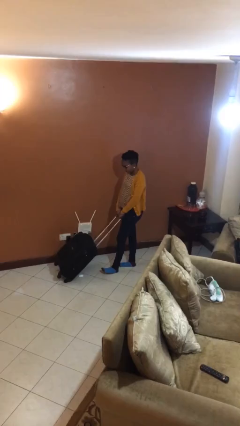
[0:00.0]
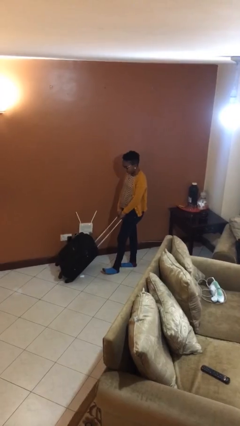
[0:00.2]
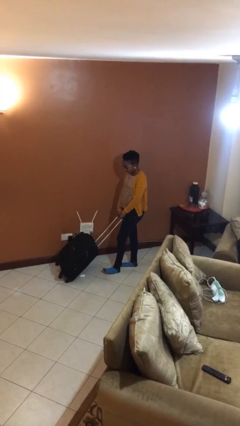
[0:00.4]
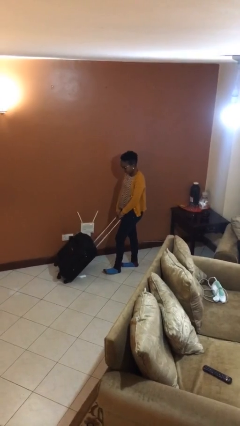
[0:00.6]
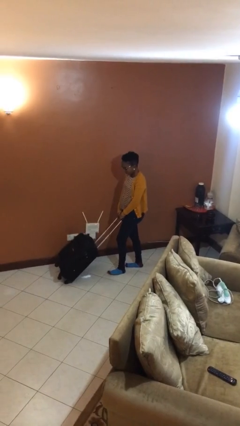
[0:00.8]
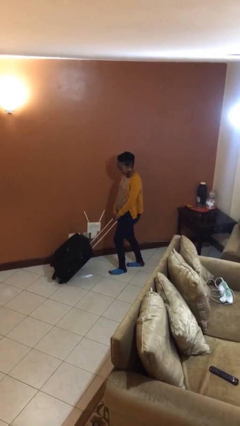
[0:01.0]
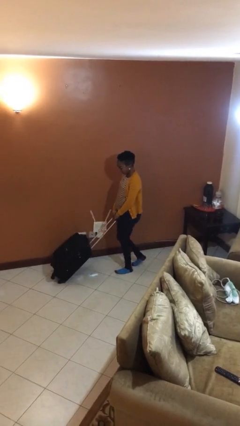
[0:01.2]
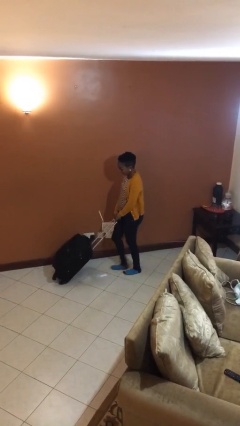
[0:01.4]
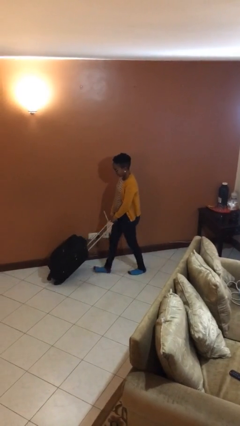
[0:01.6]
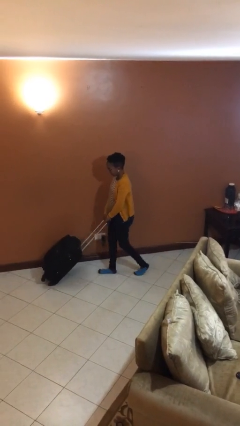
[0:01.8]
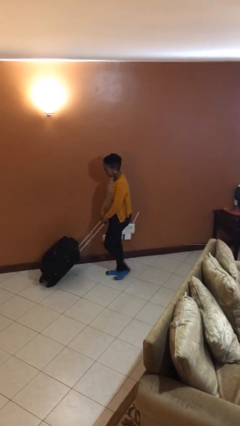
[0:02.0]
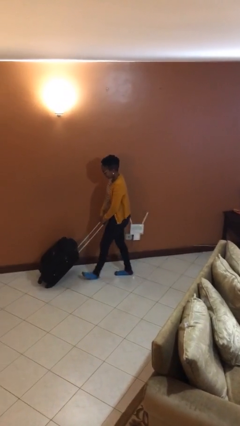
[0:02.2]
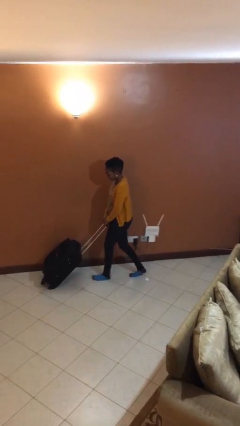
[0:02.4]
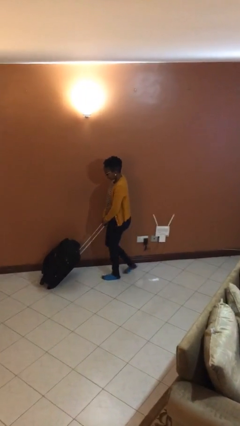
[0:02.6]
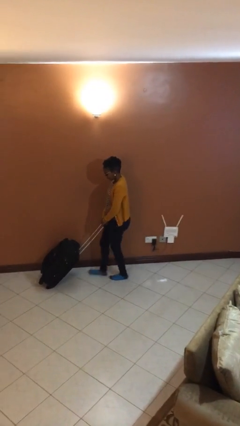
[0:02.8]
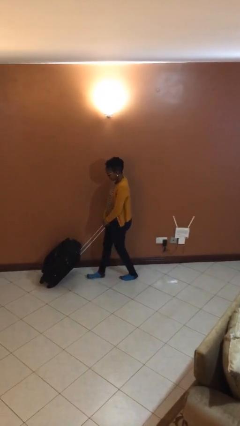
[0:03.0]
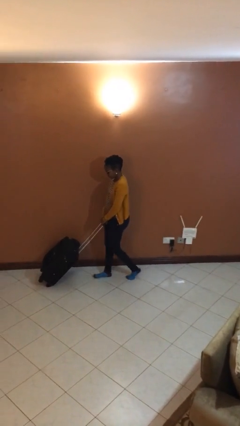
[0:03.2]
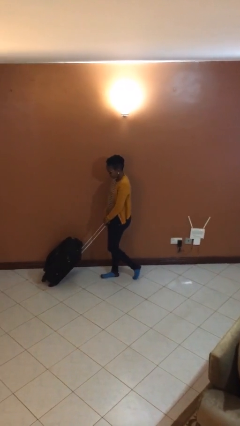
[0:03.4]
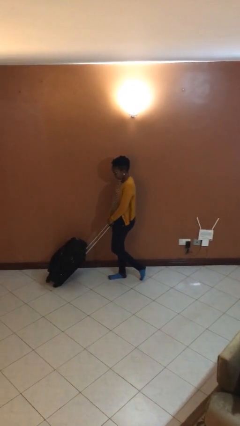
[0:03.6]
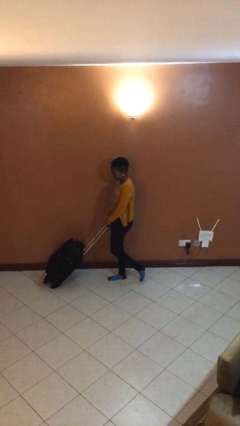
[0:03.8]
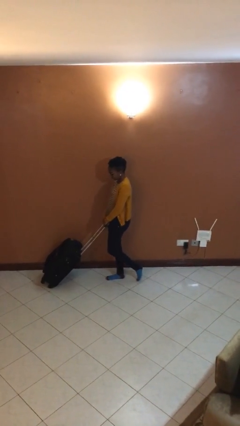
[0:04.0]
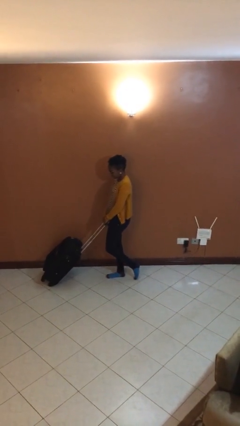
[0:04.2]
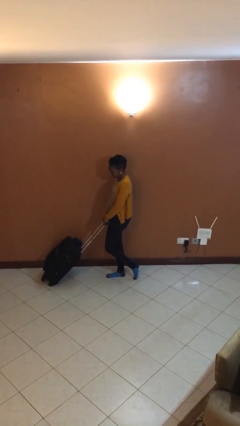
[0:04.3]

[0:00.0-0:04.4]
person pushes wheeled cart

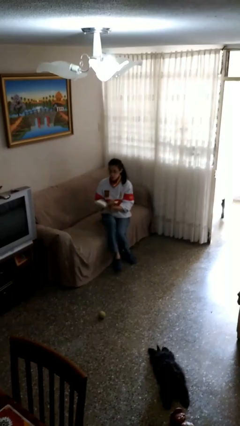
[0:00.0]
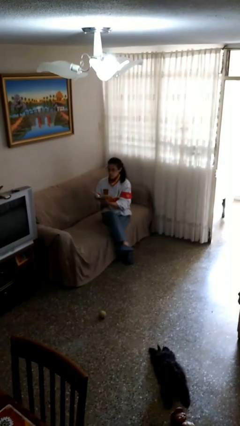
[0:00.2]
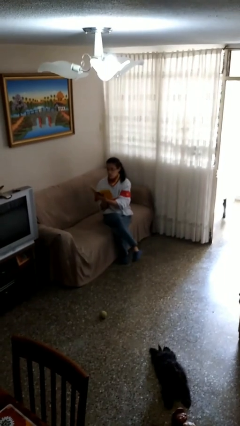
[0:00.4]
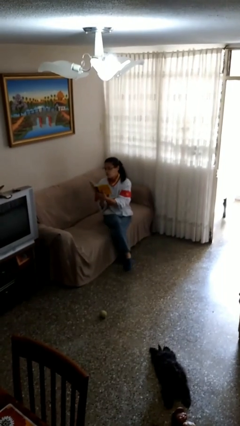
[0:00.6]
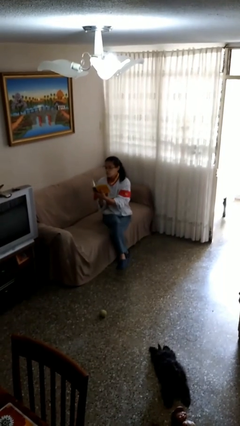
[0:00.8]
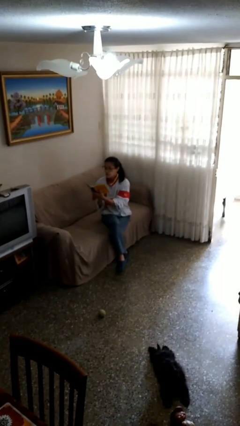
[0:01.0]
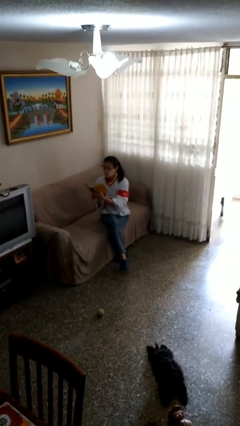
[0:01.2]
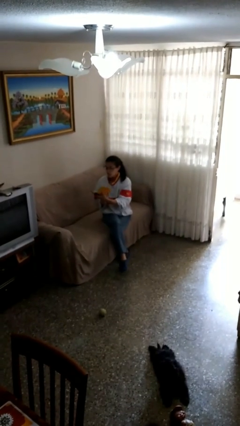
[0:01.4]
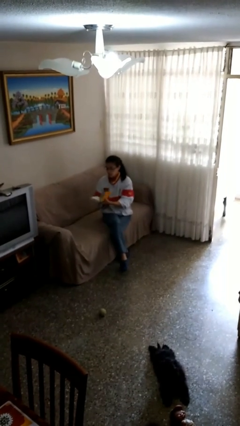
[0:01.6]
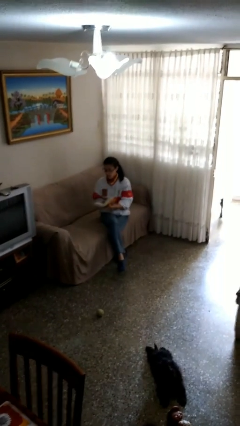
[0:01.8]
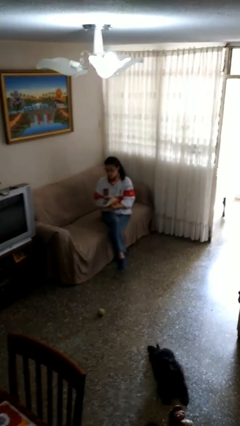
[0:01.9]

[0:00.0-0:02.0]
person reads document

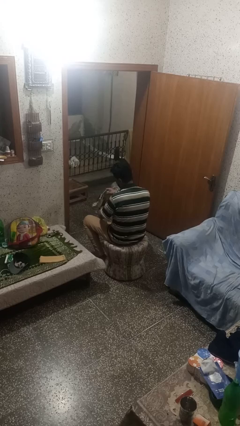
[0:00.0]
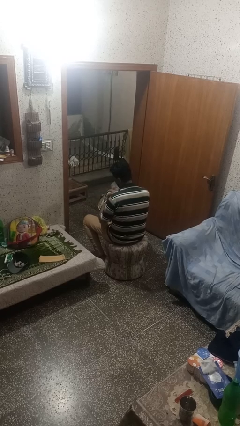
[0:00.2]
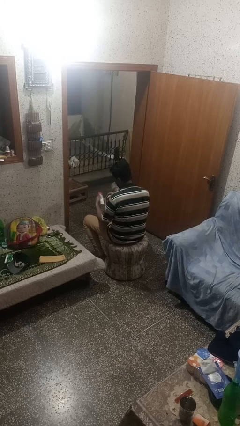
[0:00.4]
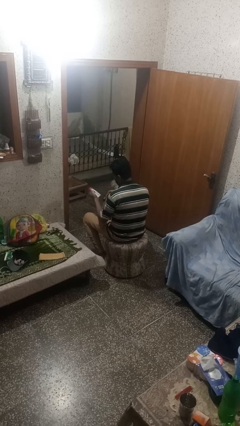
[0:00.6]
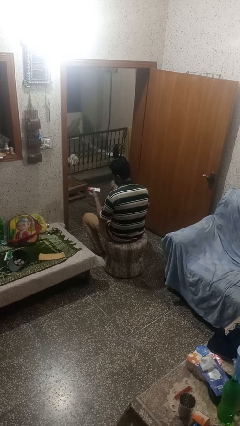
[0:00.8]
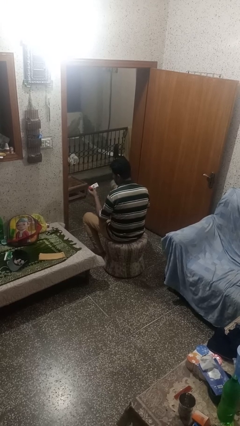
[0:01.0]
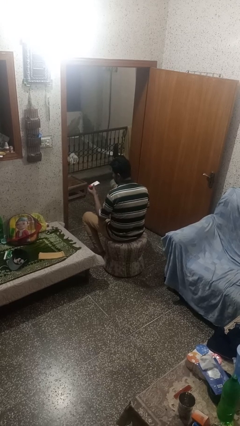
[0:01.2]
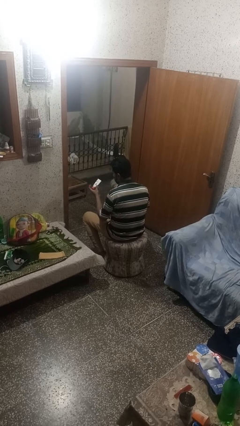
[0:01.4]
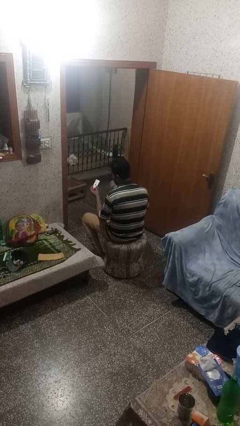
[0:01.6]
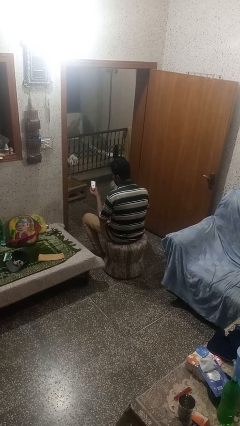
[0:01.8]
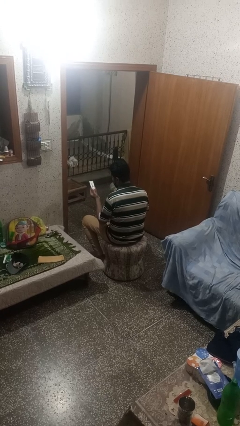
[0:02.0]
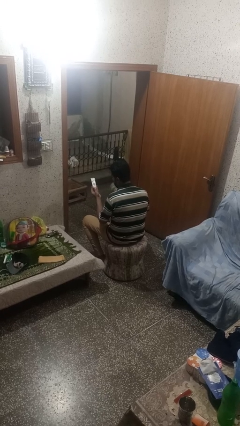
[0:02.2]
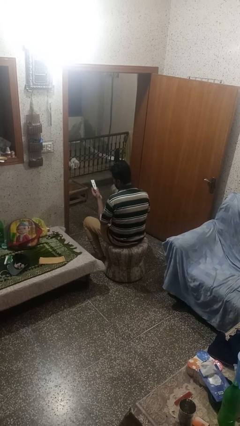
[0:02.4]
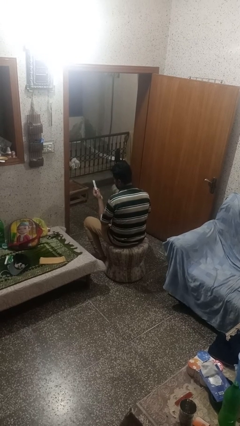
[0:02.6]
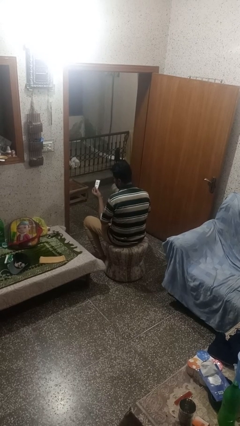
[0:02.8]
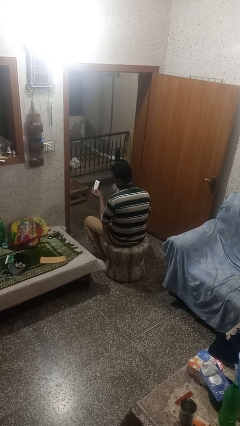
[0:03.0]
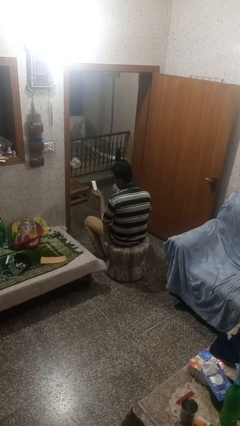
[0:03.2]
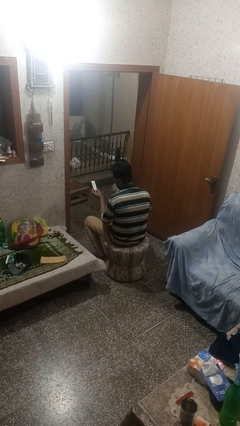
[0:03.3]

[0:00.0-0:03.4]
person takes object from purse

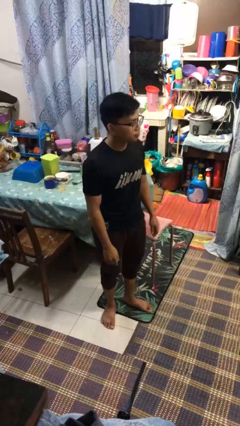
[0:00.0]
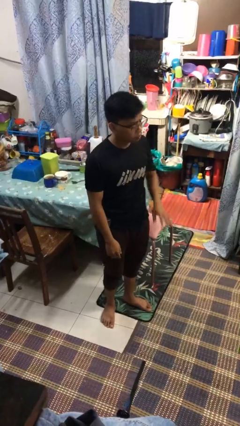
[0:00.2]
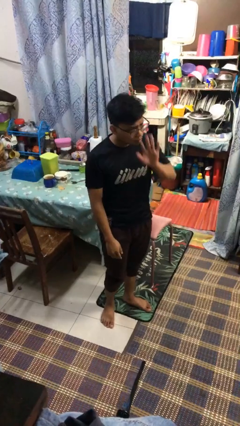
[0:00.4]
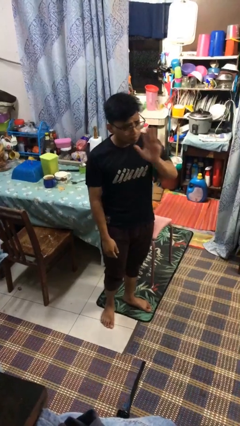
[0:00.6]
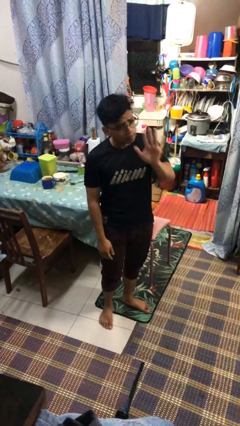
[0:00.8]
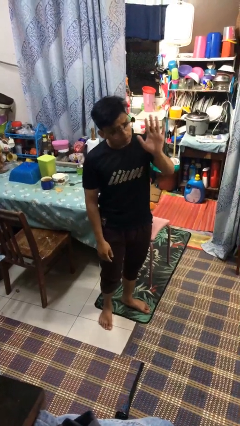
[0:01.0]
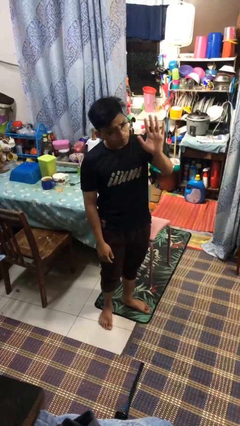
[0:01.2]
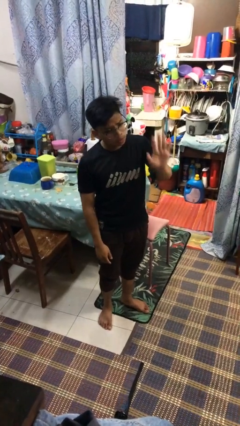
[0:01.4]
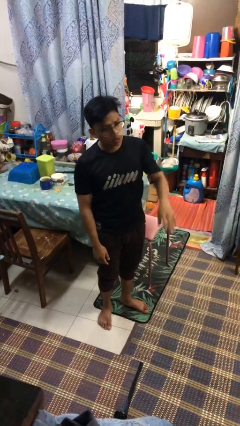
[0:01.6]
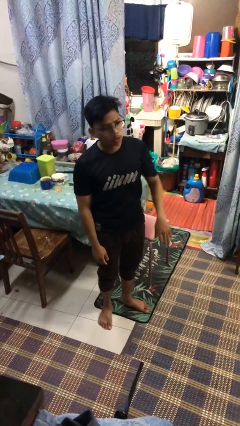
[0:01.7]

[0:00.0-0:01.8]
person gestures stop

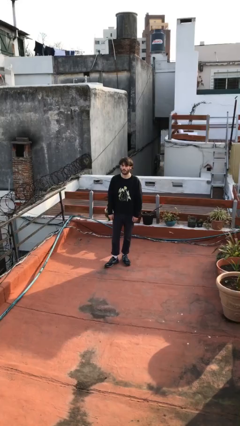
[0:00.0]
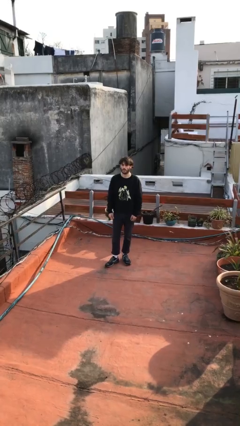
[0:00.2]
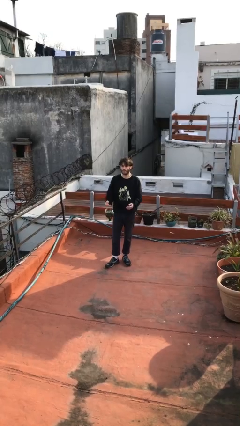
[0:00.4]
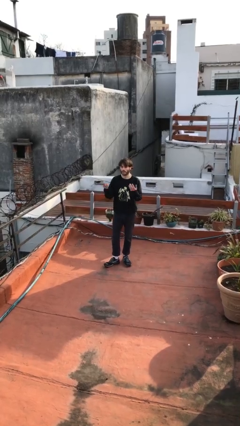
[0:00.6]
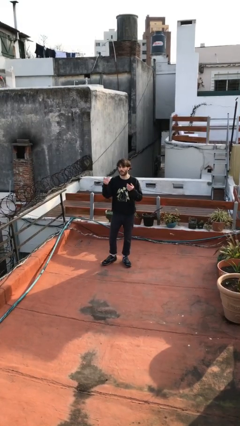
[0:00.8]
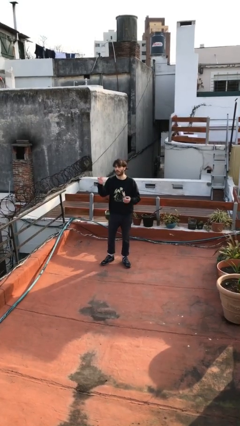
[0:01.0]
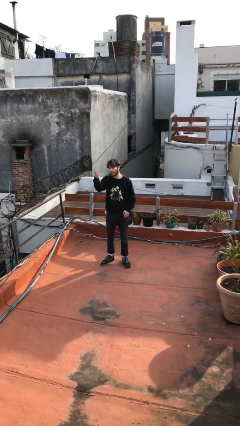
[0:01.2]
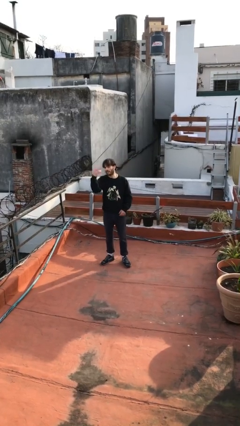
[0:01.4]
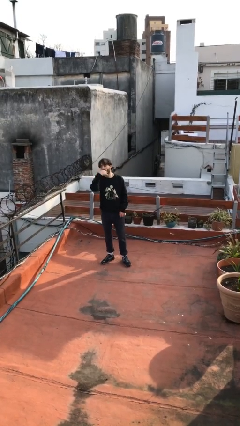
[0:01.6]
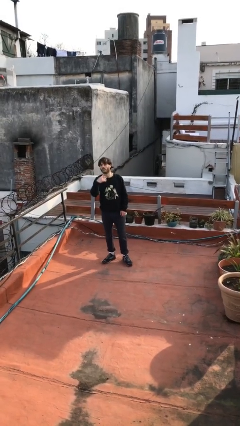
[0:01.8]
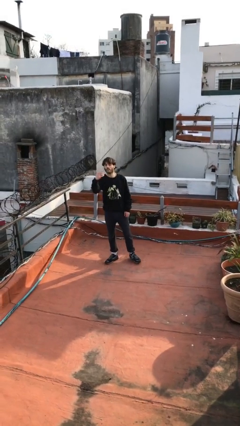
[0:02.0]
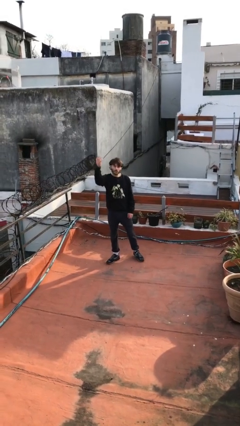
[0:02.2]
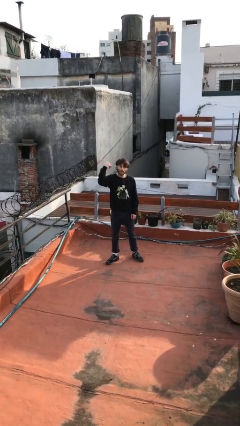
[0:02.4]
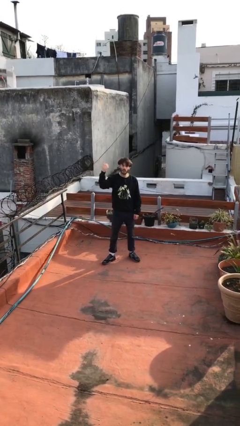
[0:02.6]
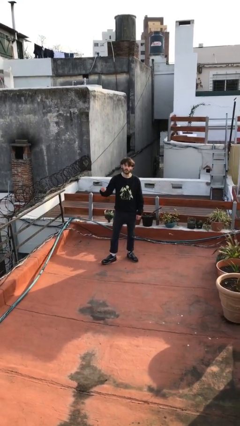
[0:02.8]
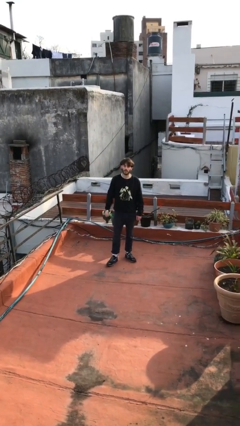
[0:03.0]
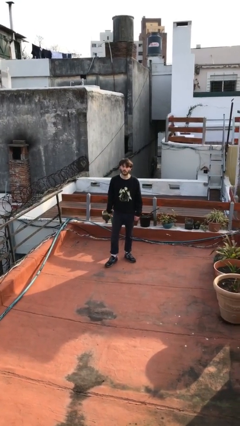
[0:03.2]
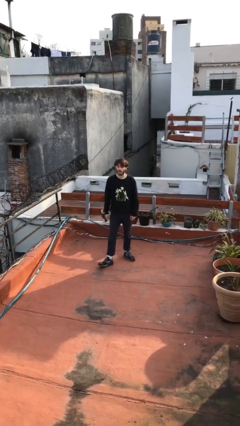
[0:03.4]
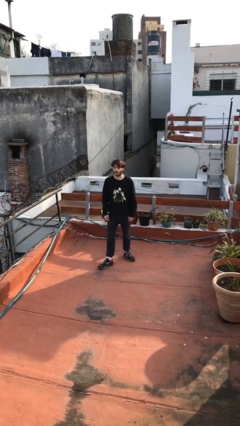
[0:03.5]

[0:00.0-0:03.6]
person gestures come here

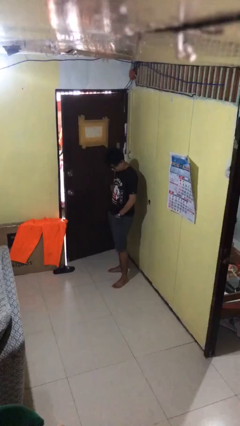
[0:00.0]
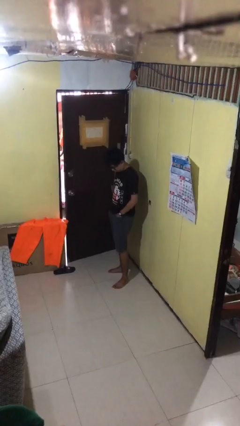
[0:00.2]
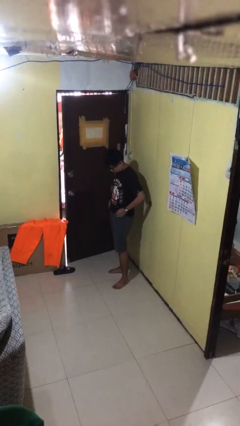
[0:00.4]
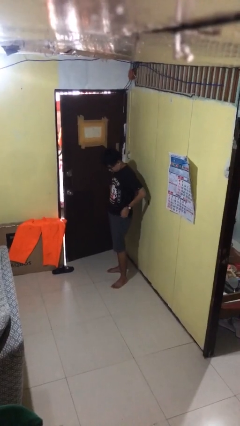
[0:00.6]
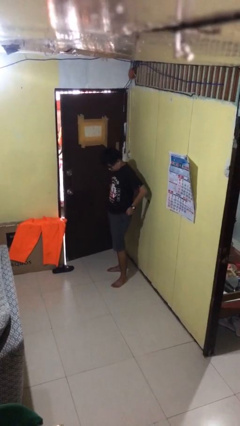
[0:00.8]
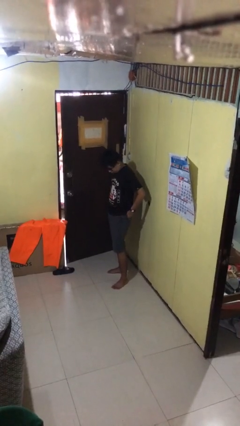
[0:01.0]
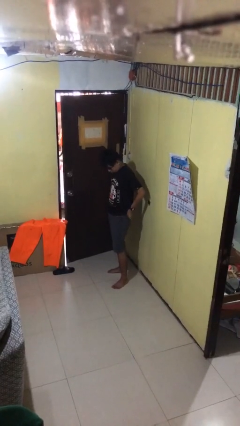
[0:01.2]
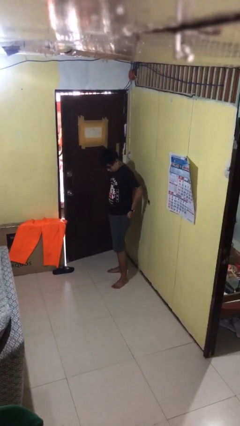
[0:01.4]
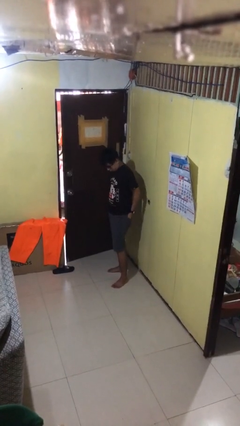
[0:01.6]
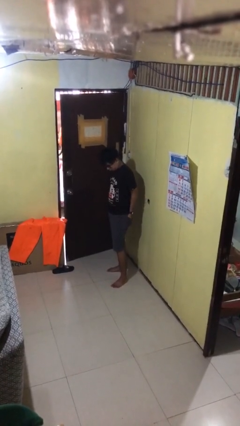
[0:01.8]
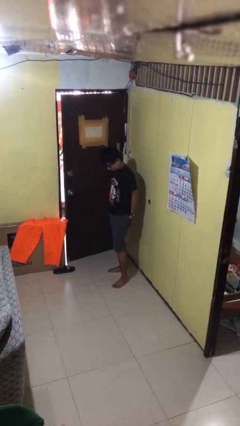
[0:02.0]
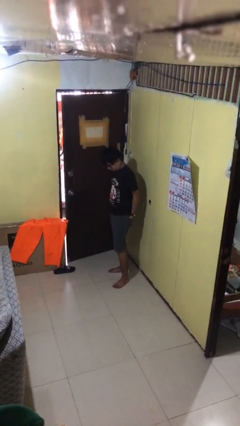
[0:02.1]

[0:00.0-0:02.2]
person puts hands in back pockets

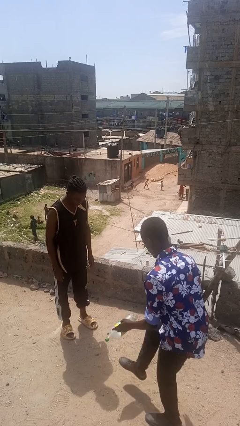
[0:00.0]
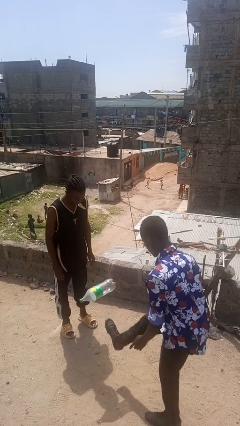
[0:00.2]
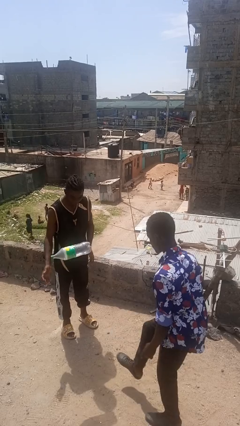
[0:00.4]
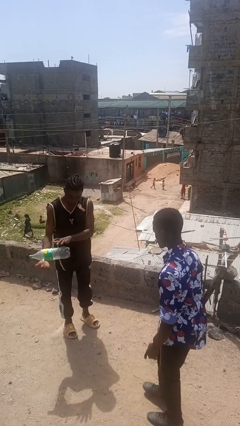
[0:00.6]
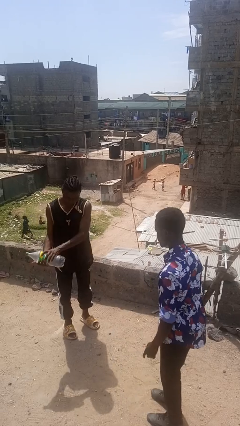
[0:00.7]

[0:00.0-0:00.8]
person kicks object to person
